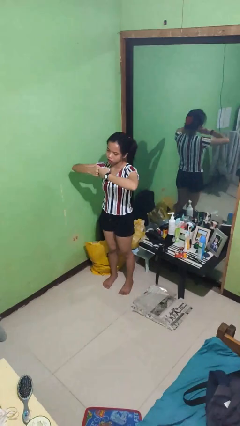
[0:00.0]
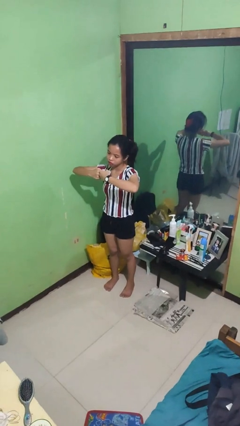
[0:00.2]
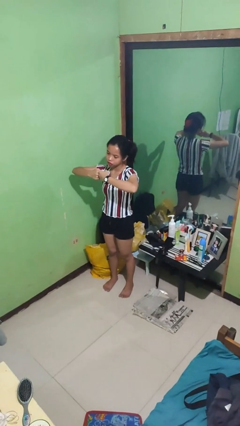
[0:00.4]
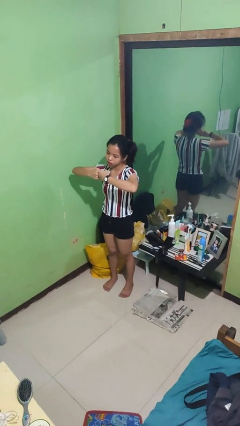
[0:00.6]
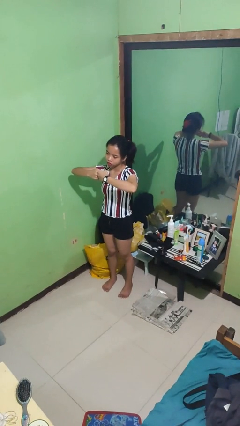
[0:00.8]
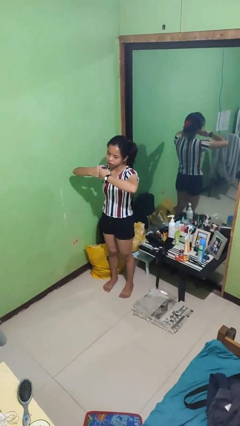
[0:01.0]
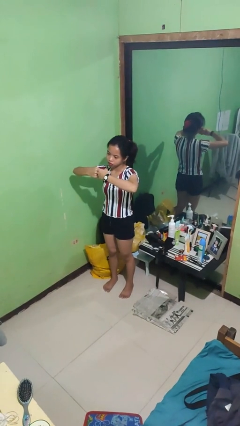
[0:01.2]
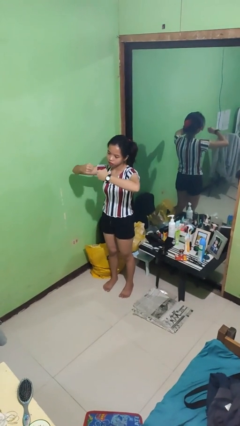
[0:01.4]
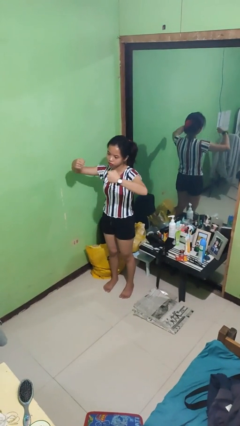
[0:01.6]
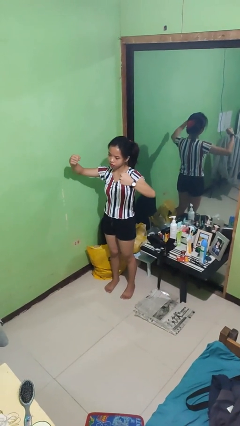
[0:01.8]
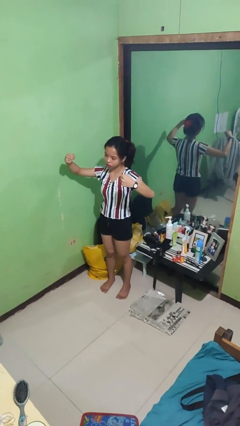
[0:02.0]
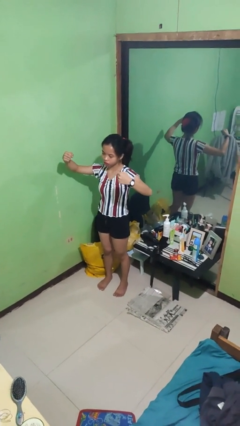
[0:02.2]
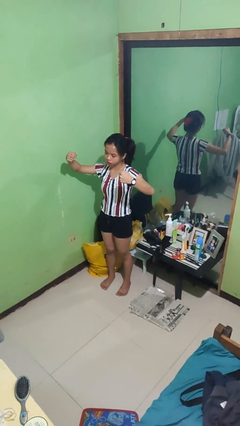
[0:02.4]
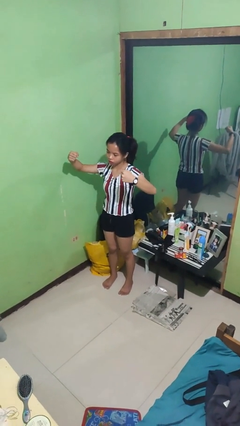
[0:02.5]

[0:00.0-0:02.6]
person gestures zoom in

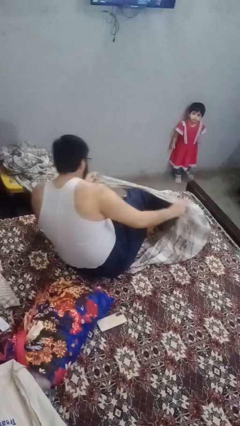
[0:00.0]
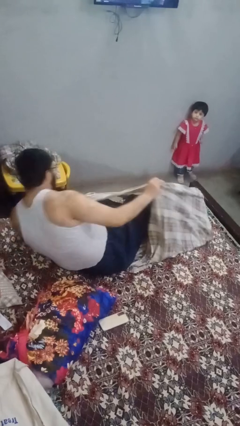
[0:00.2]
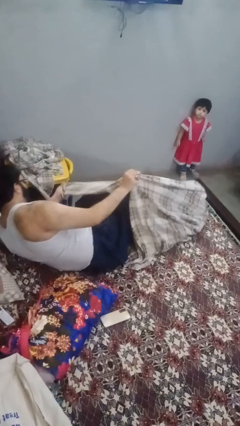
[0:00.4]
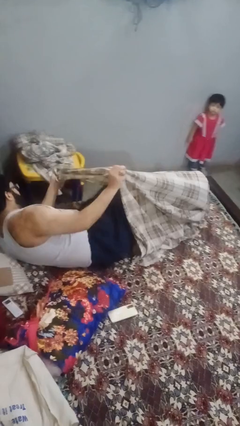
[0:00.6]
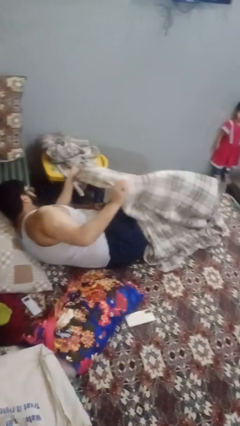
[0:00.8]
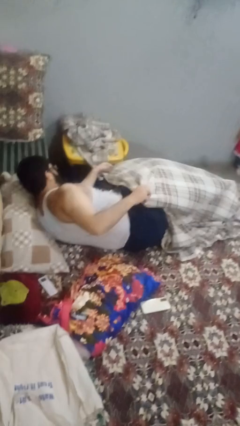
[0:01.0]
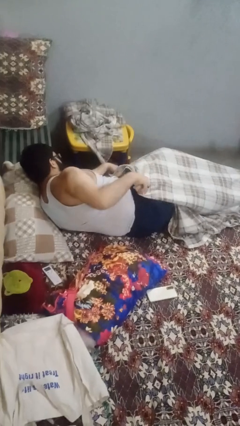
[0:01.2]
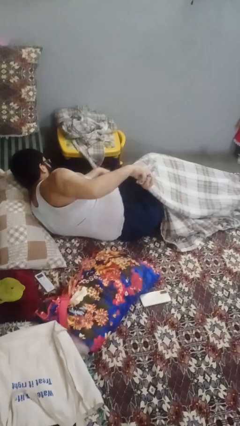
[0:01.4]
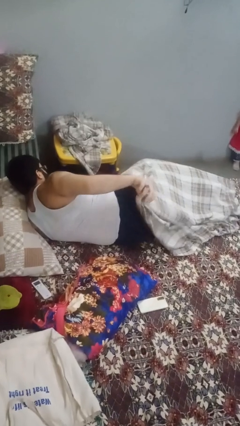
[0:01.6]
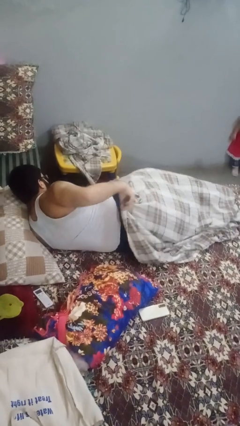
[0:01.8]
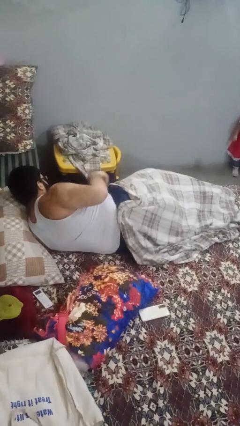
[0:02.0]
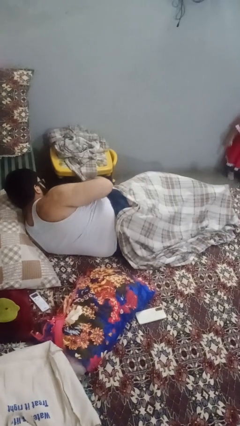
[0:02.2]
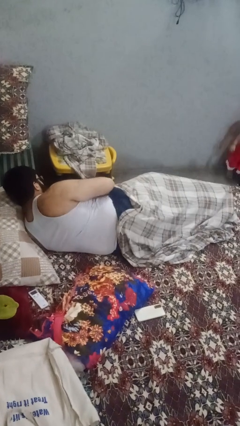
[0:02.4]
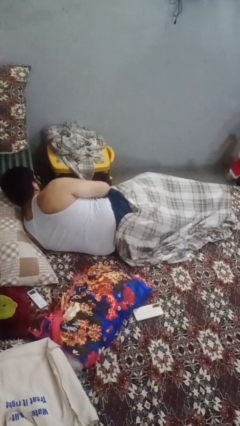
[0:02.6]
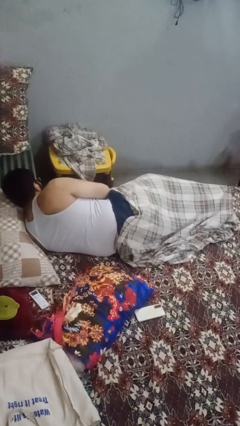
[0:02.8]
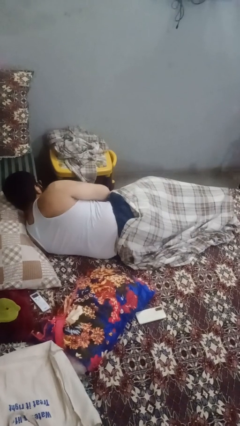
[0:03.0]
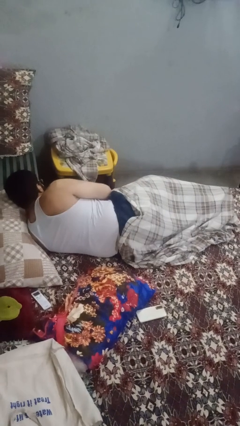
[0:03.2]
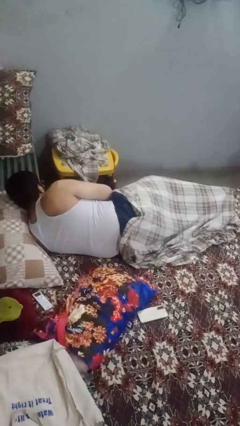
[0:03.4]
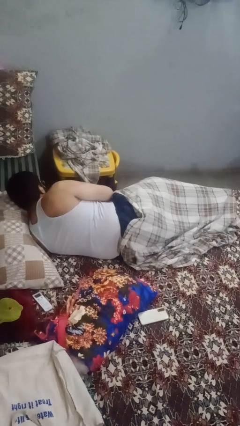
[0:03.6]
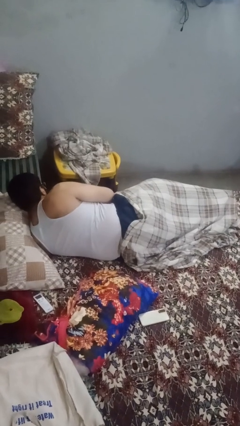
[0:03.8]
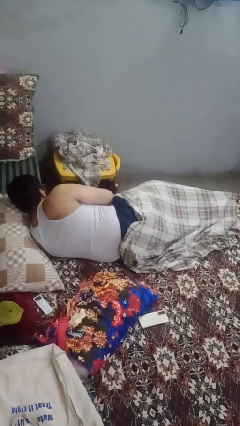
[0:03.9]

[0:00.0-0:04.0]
person covers with blanket

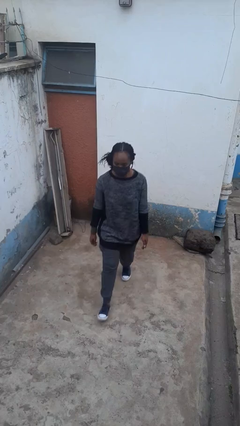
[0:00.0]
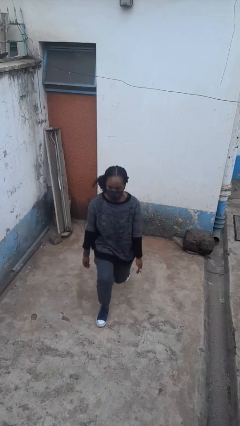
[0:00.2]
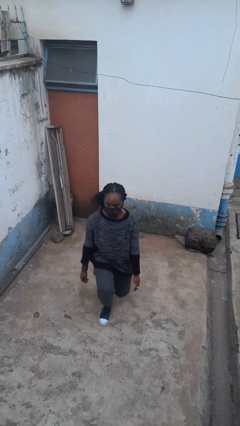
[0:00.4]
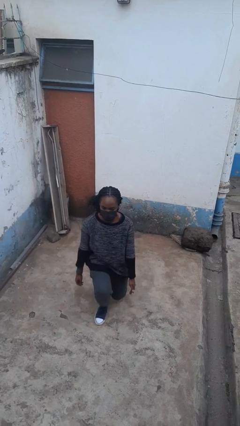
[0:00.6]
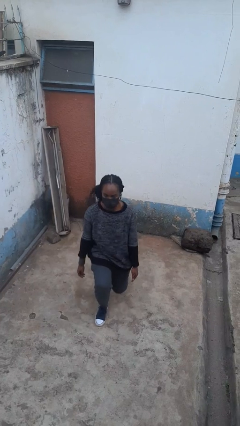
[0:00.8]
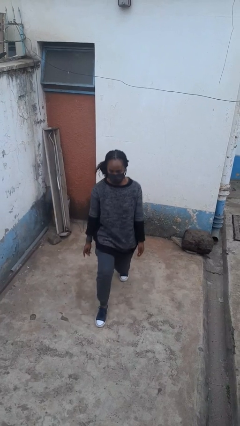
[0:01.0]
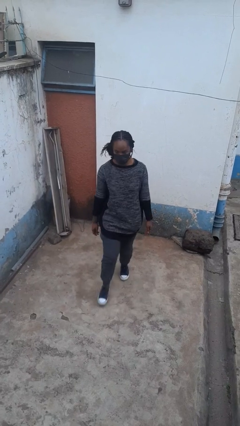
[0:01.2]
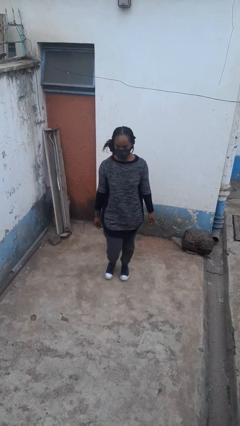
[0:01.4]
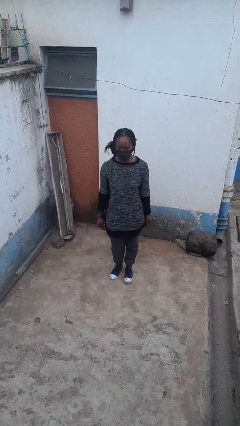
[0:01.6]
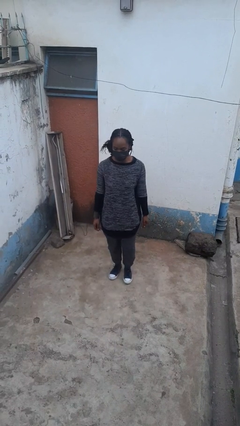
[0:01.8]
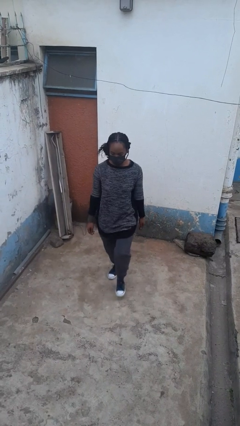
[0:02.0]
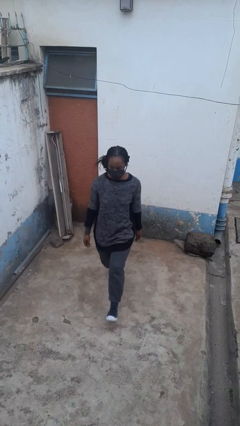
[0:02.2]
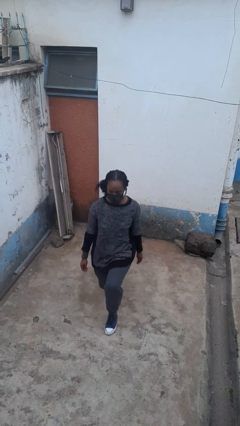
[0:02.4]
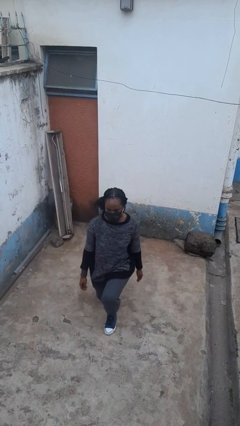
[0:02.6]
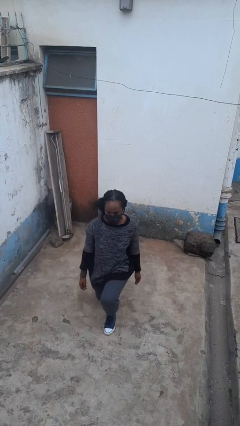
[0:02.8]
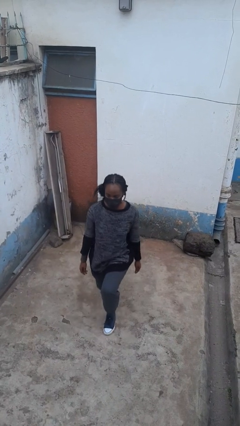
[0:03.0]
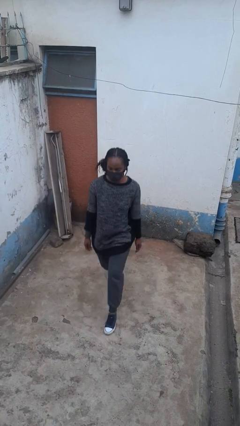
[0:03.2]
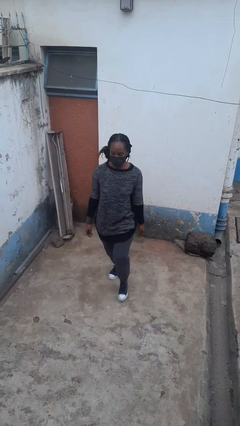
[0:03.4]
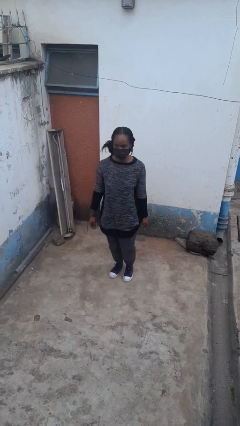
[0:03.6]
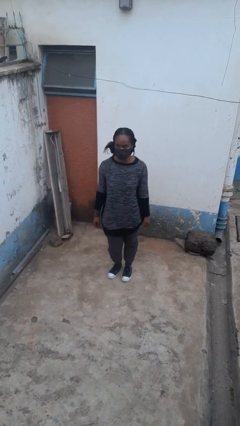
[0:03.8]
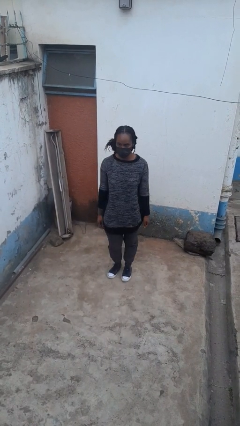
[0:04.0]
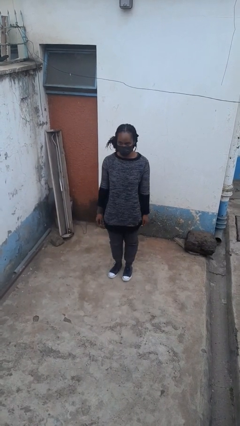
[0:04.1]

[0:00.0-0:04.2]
person exercises with lunges

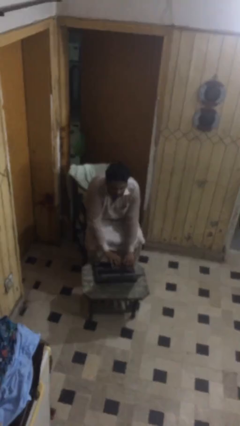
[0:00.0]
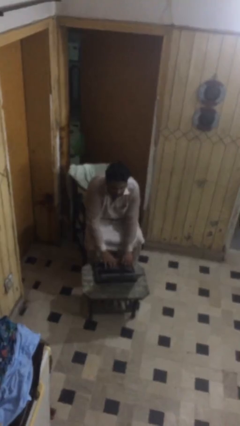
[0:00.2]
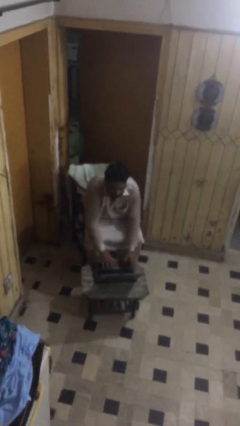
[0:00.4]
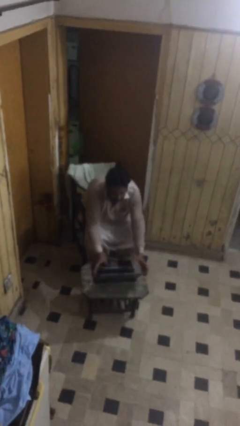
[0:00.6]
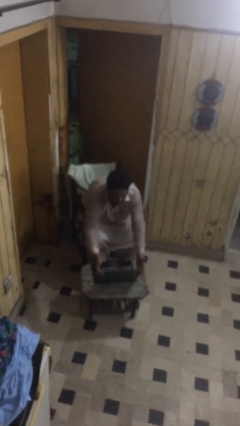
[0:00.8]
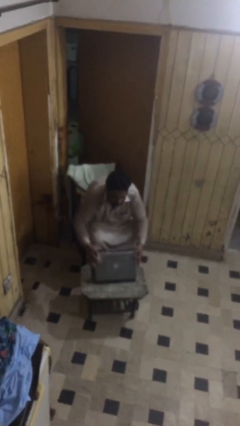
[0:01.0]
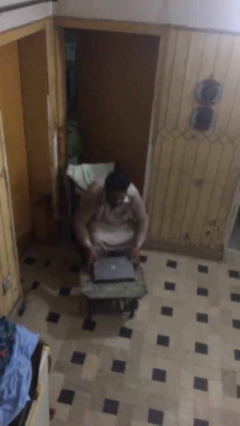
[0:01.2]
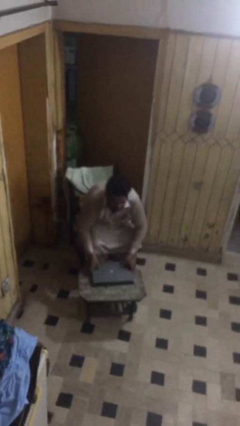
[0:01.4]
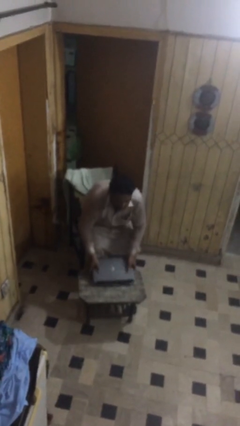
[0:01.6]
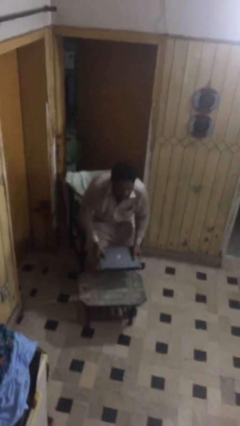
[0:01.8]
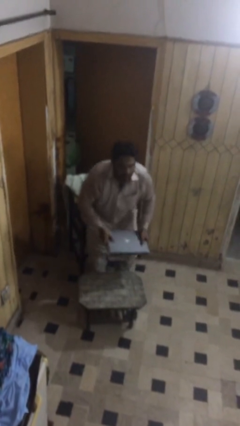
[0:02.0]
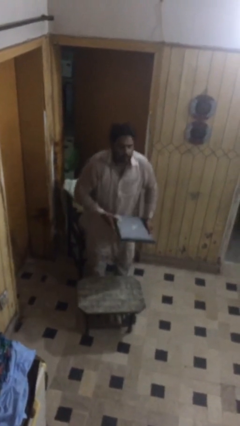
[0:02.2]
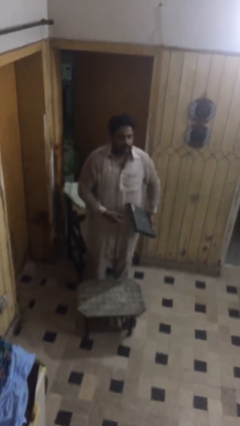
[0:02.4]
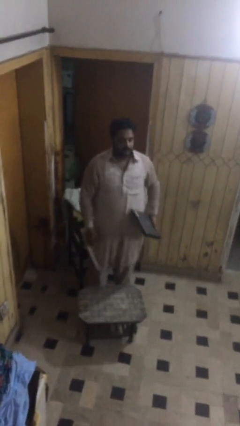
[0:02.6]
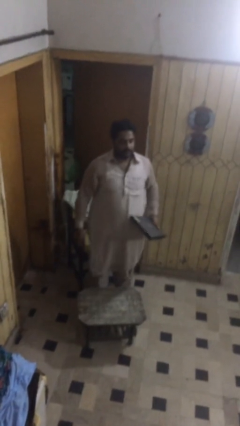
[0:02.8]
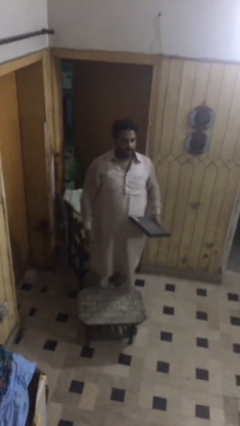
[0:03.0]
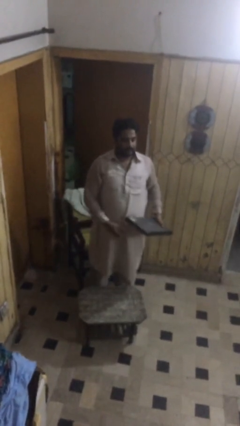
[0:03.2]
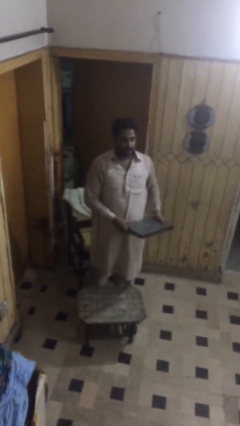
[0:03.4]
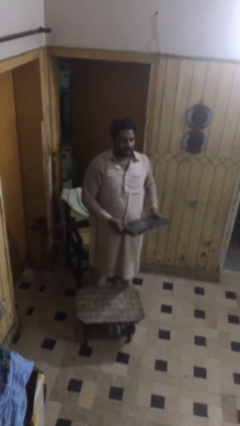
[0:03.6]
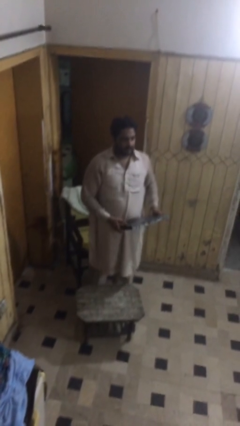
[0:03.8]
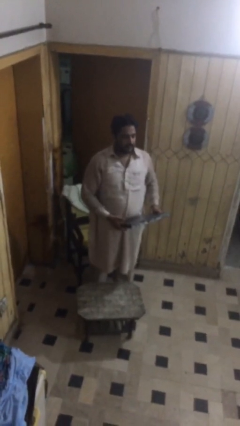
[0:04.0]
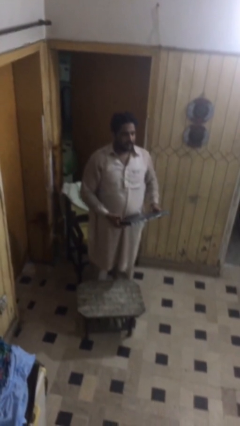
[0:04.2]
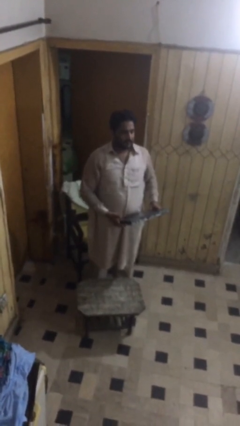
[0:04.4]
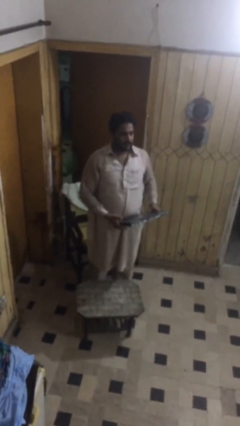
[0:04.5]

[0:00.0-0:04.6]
person stands up

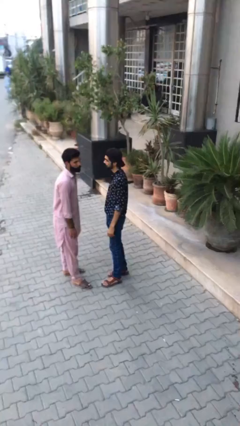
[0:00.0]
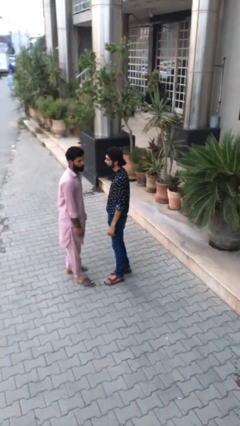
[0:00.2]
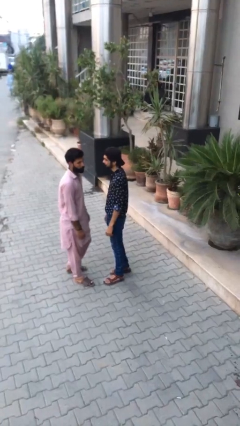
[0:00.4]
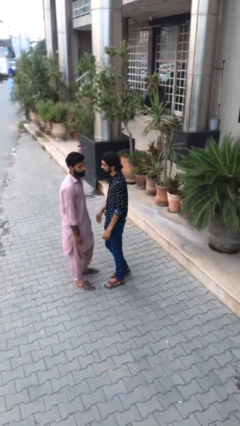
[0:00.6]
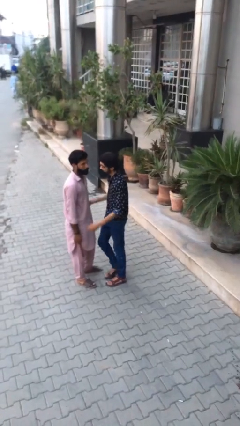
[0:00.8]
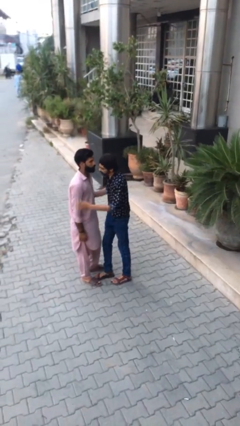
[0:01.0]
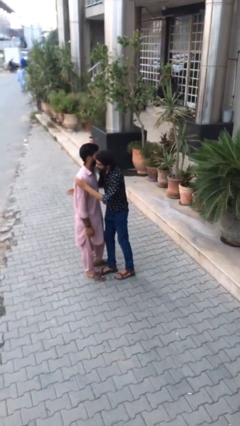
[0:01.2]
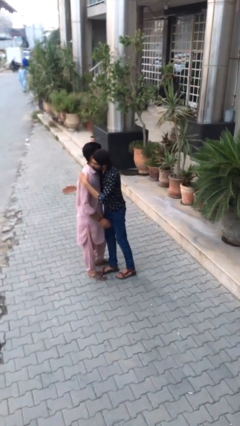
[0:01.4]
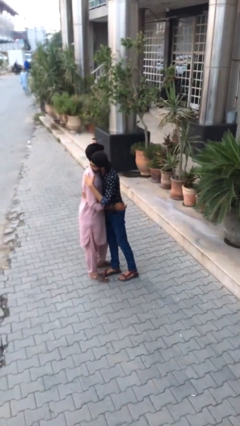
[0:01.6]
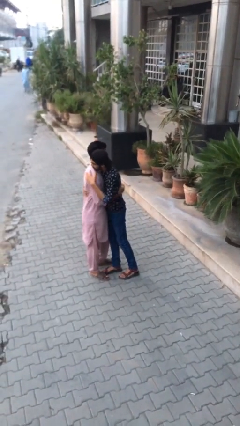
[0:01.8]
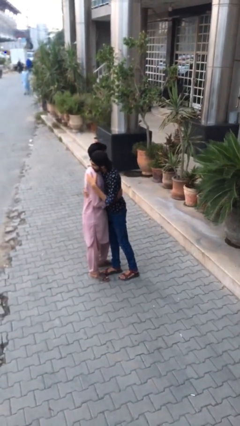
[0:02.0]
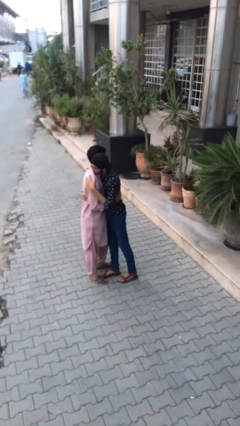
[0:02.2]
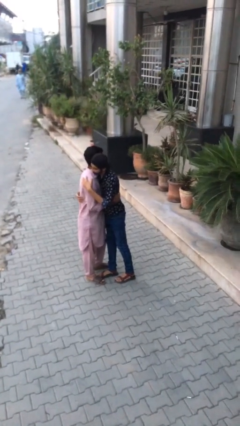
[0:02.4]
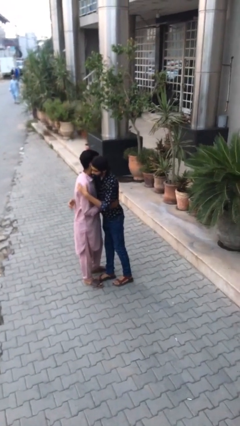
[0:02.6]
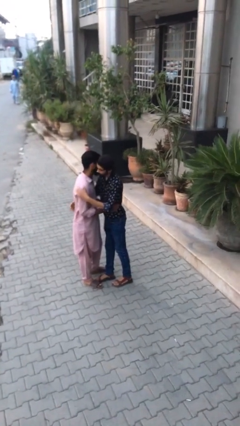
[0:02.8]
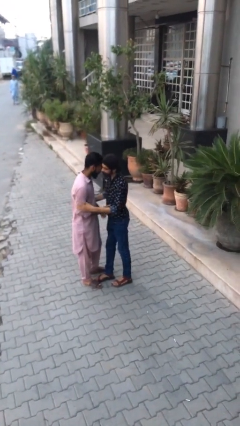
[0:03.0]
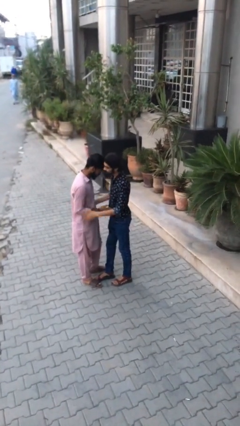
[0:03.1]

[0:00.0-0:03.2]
person embraces person
